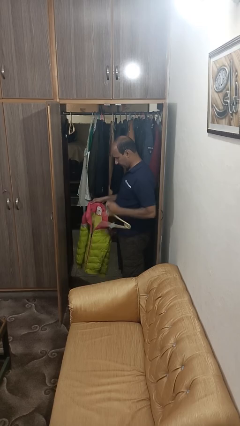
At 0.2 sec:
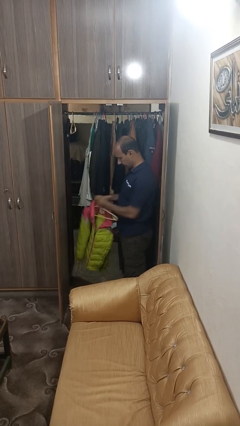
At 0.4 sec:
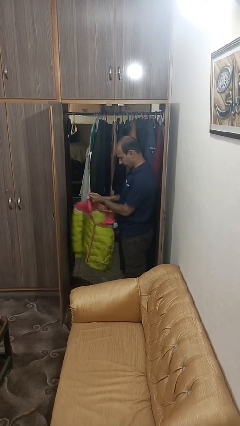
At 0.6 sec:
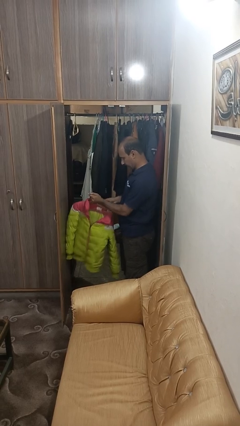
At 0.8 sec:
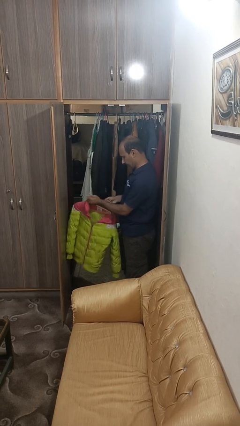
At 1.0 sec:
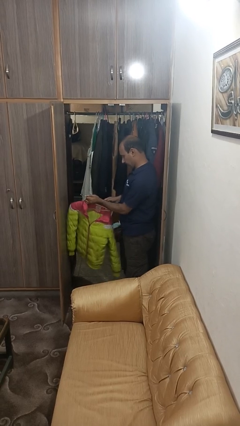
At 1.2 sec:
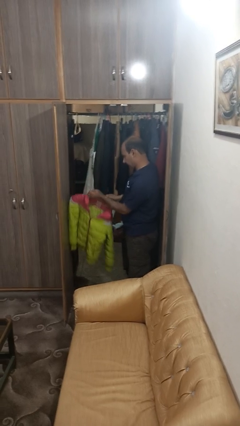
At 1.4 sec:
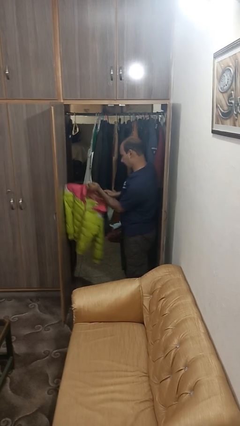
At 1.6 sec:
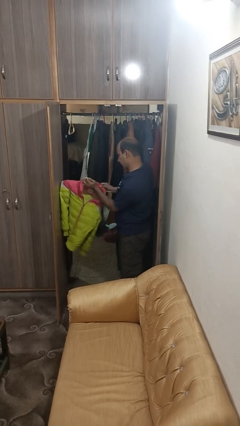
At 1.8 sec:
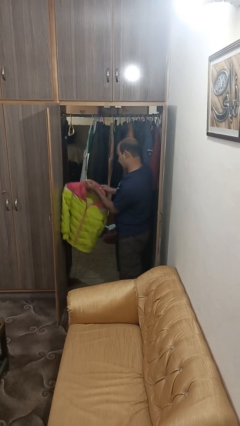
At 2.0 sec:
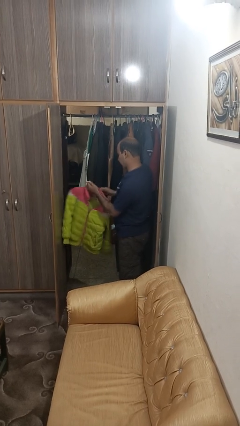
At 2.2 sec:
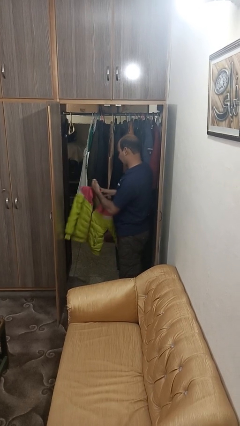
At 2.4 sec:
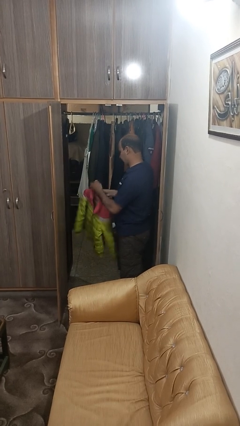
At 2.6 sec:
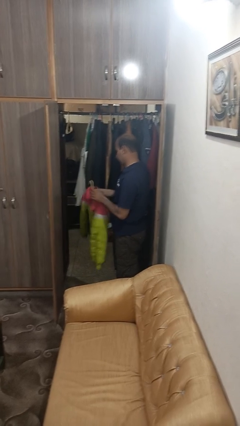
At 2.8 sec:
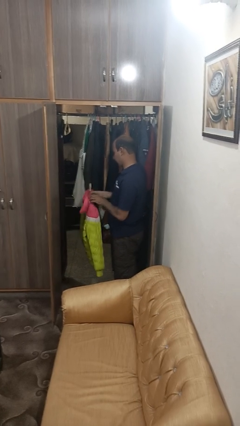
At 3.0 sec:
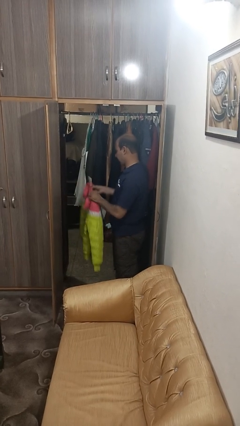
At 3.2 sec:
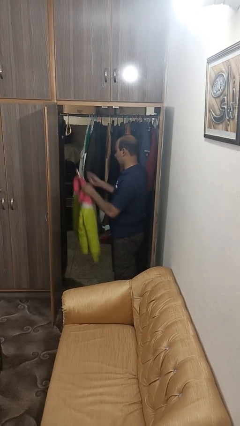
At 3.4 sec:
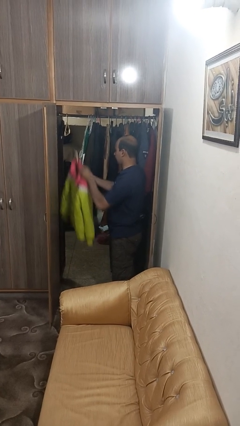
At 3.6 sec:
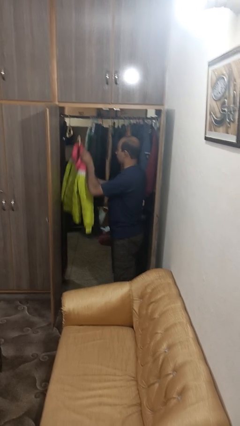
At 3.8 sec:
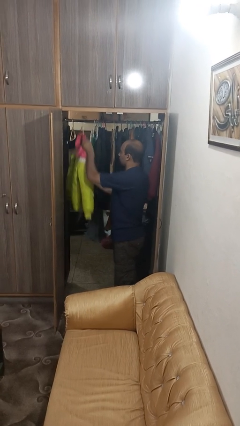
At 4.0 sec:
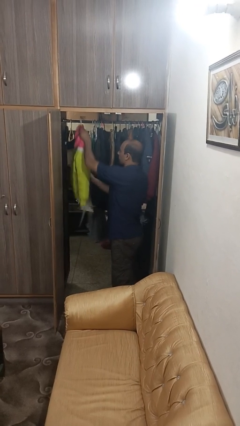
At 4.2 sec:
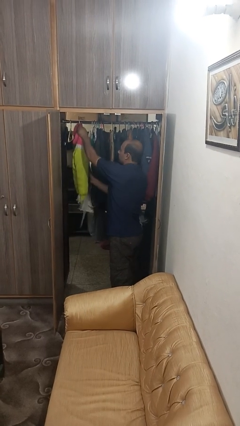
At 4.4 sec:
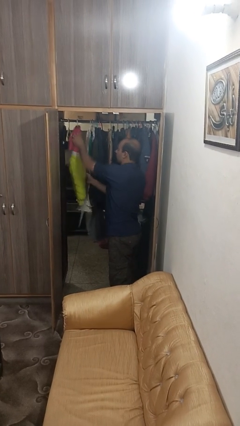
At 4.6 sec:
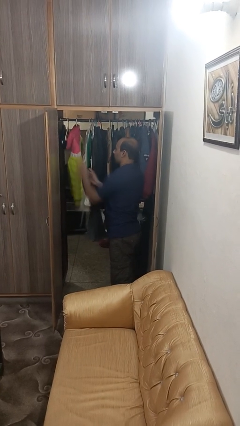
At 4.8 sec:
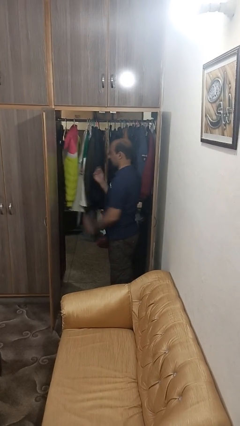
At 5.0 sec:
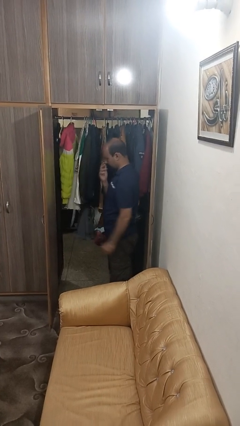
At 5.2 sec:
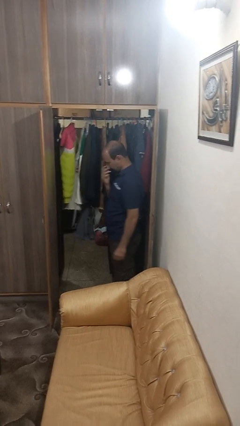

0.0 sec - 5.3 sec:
person puts clothes into closet

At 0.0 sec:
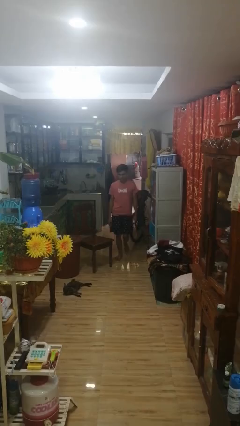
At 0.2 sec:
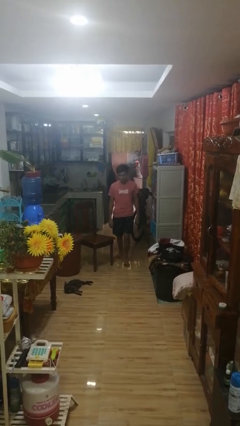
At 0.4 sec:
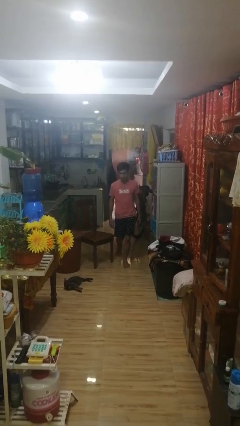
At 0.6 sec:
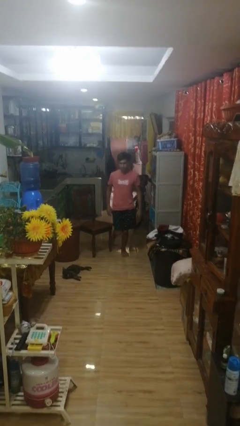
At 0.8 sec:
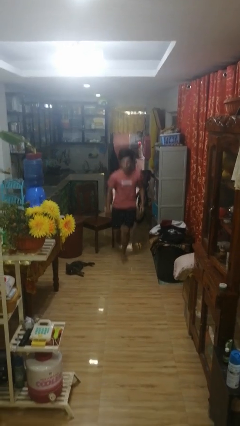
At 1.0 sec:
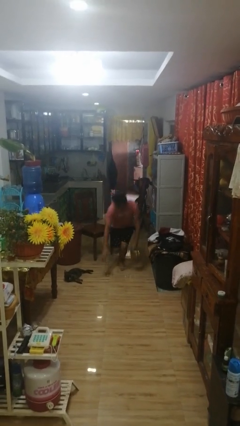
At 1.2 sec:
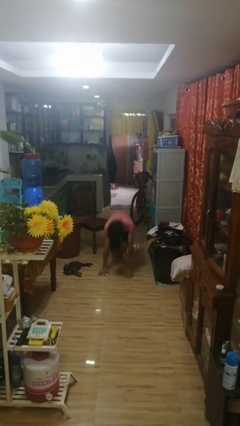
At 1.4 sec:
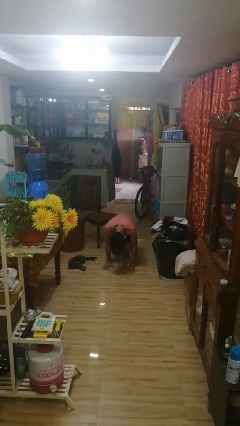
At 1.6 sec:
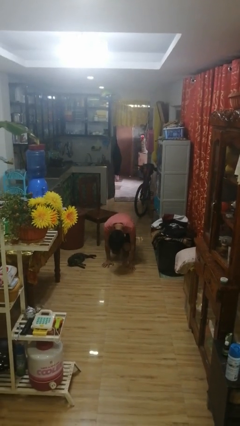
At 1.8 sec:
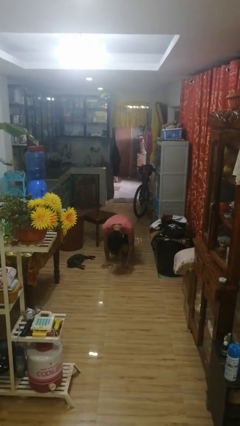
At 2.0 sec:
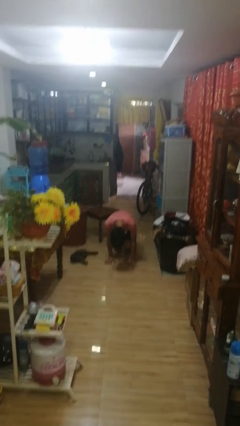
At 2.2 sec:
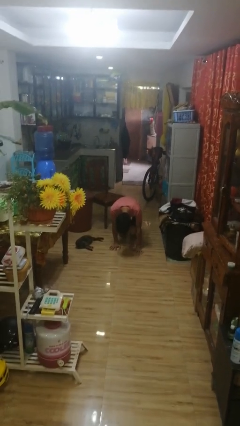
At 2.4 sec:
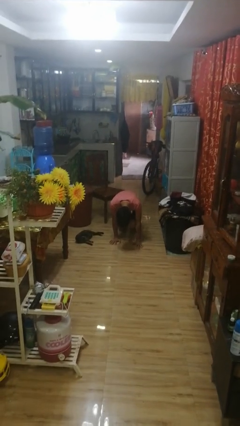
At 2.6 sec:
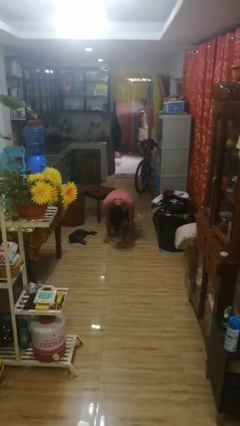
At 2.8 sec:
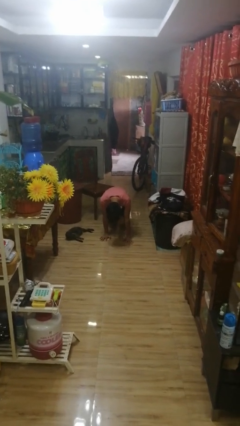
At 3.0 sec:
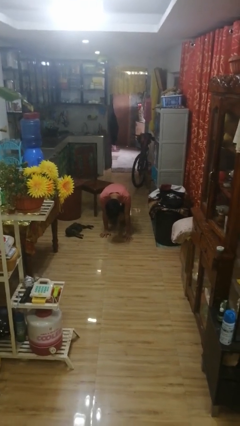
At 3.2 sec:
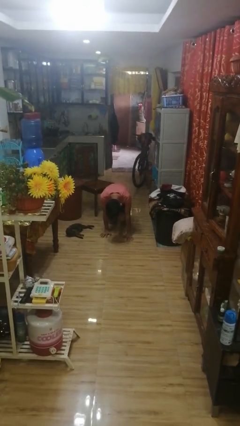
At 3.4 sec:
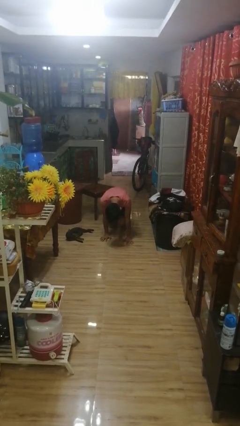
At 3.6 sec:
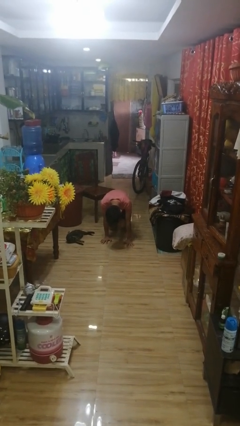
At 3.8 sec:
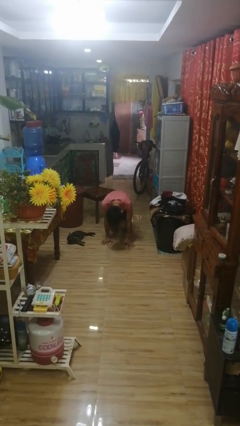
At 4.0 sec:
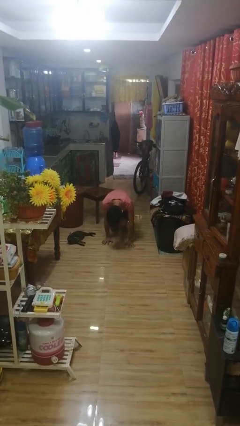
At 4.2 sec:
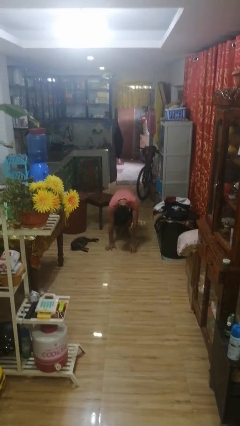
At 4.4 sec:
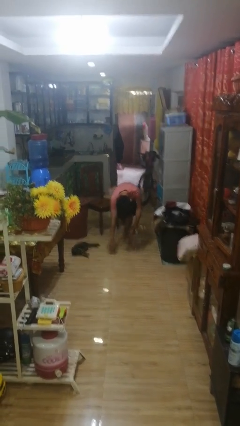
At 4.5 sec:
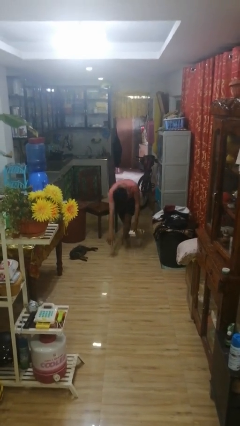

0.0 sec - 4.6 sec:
person trips on object on floor

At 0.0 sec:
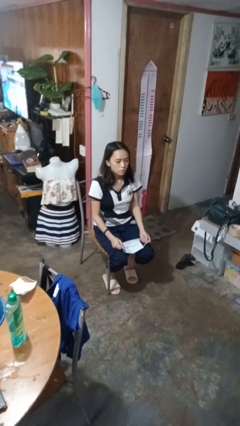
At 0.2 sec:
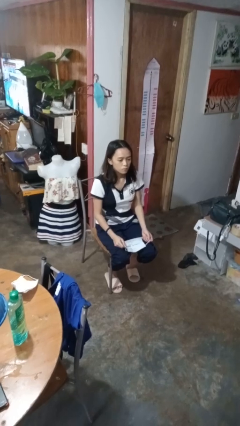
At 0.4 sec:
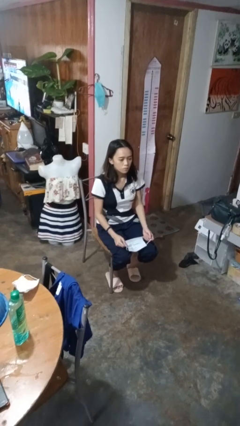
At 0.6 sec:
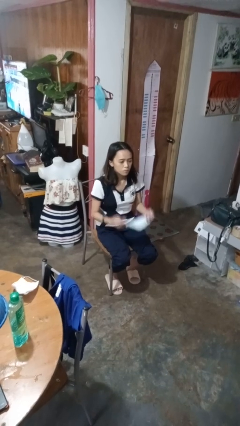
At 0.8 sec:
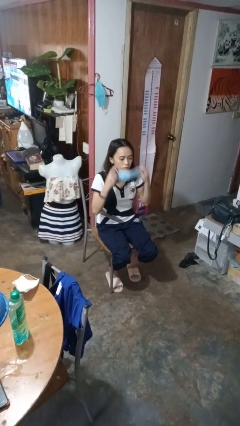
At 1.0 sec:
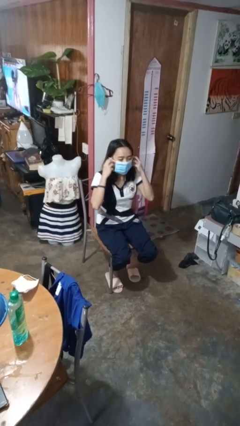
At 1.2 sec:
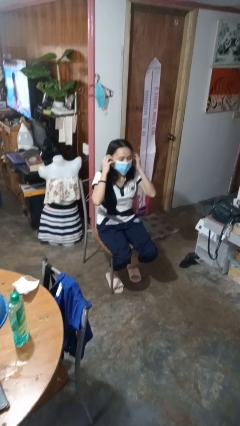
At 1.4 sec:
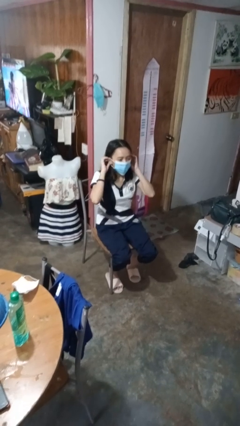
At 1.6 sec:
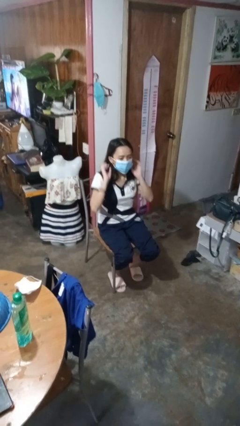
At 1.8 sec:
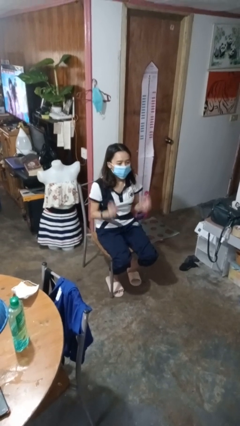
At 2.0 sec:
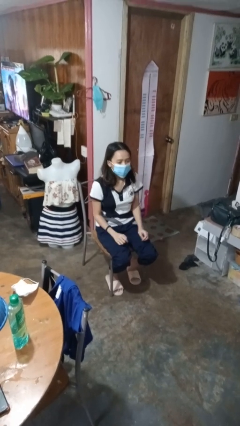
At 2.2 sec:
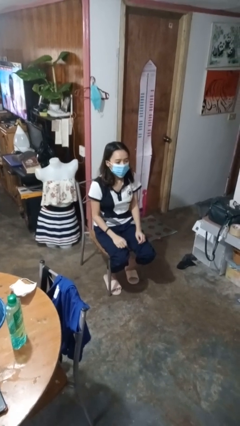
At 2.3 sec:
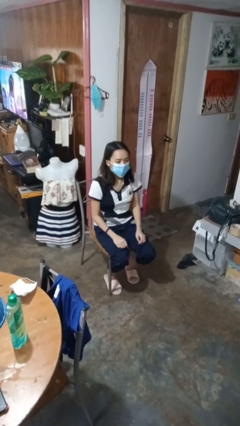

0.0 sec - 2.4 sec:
person puts on facemask

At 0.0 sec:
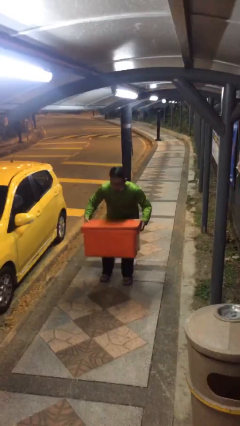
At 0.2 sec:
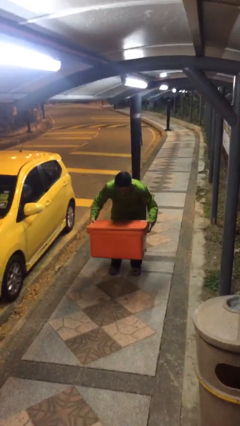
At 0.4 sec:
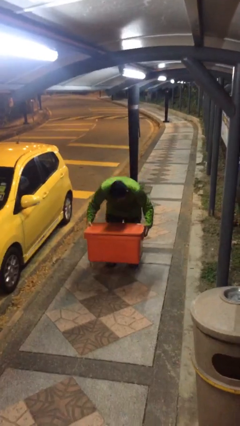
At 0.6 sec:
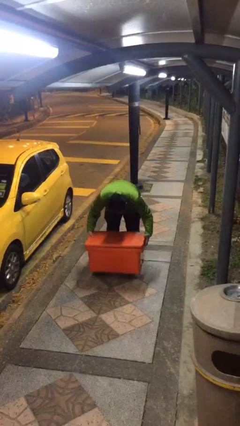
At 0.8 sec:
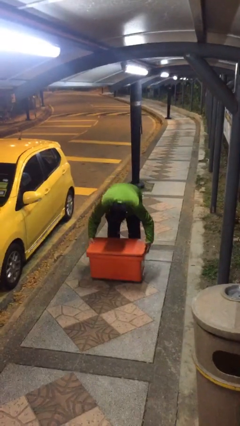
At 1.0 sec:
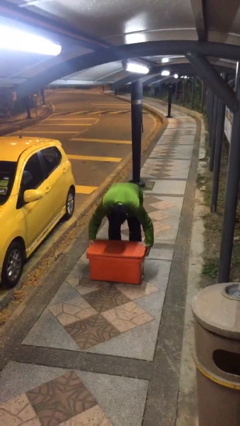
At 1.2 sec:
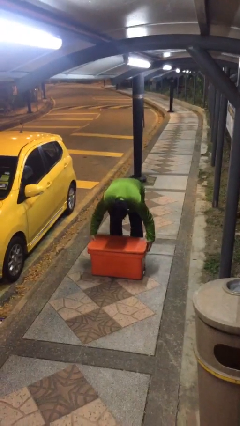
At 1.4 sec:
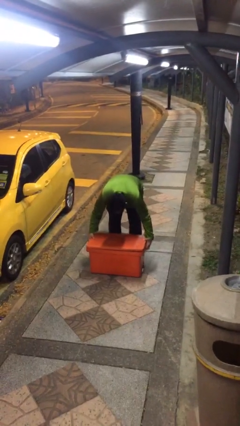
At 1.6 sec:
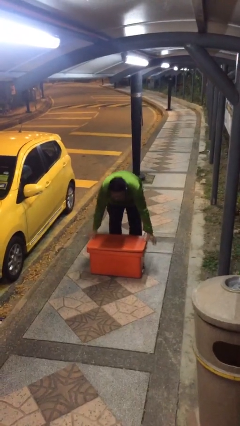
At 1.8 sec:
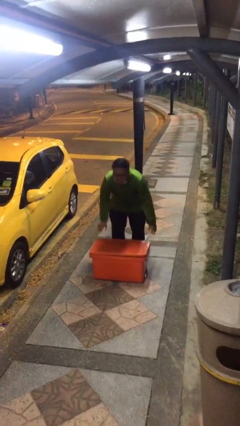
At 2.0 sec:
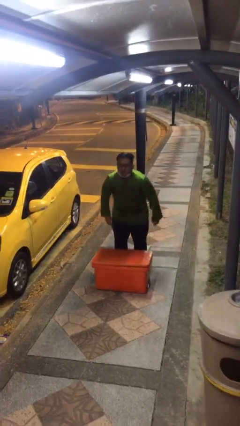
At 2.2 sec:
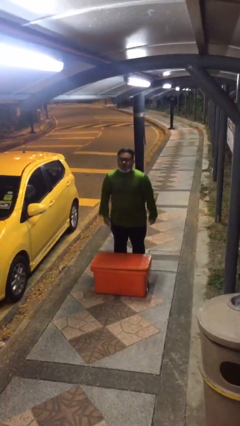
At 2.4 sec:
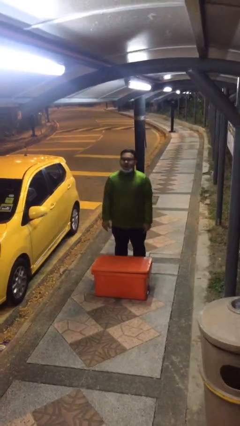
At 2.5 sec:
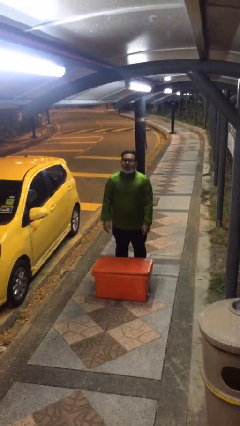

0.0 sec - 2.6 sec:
person puts down object on floor

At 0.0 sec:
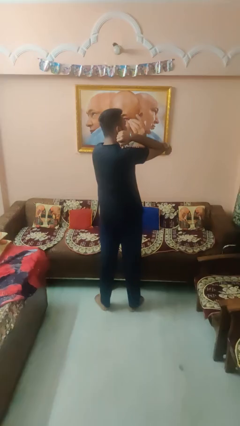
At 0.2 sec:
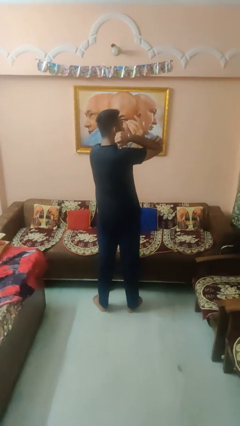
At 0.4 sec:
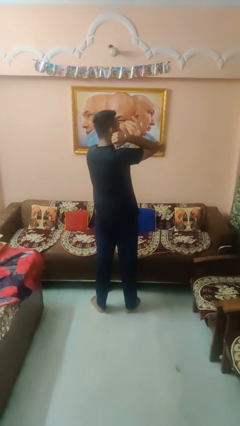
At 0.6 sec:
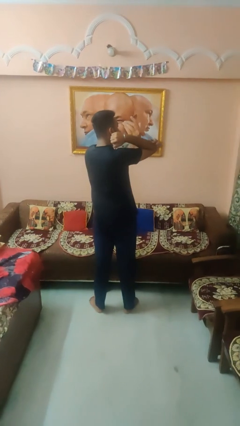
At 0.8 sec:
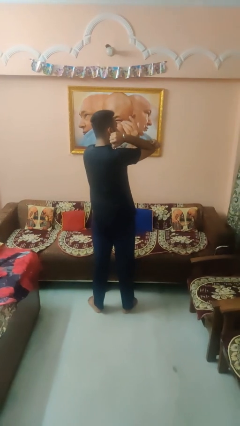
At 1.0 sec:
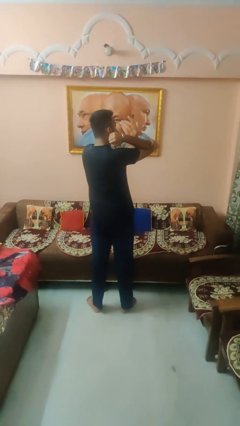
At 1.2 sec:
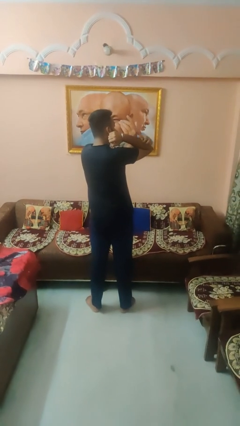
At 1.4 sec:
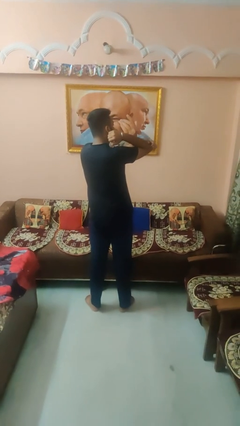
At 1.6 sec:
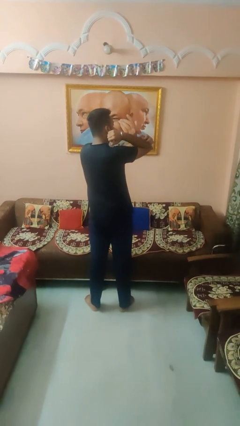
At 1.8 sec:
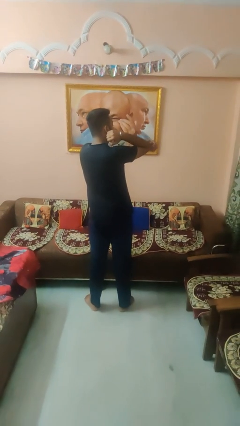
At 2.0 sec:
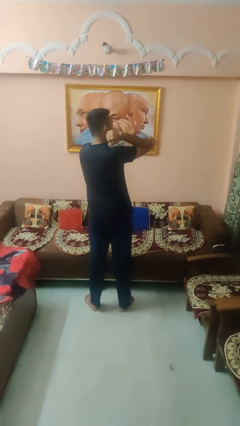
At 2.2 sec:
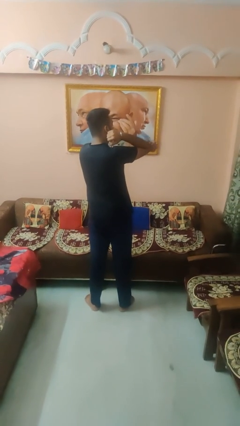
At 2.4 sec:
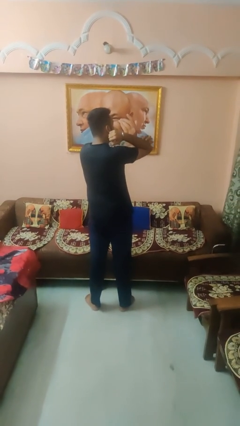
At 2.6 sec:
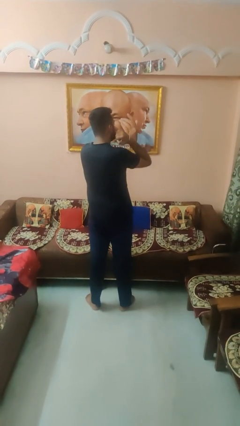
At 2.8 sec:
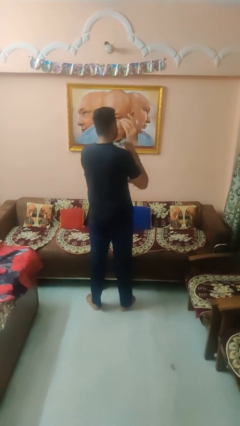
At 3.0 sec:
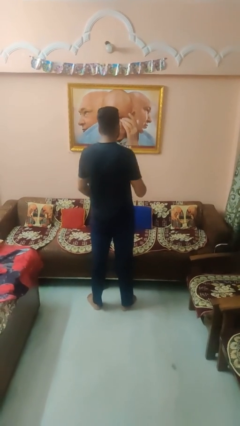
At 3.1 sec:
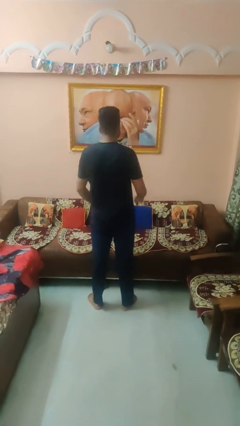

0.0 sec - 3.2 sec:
person scratches face
